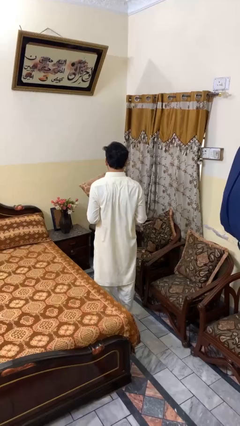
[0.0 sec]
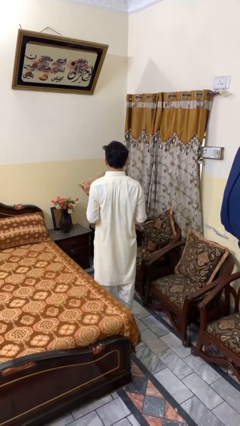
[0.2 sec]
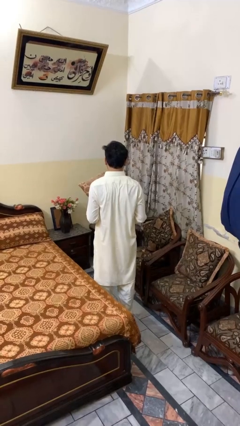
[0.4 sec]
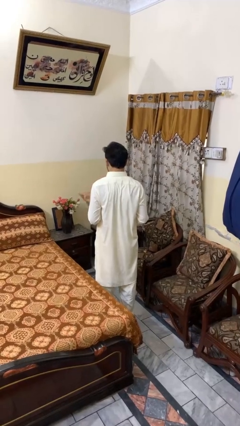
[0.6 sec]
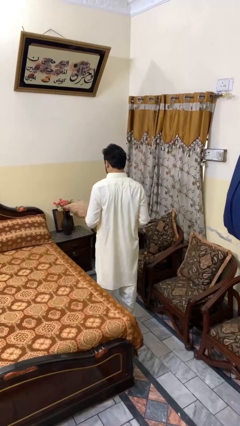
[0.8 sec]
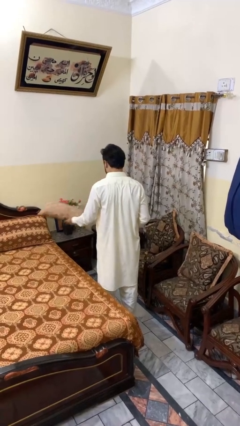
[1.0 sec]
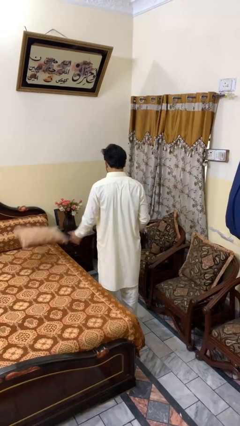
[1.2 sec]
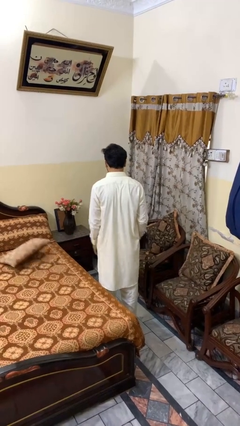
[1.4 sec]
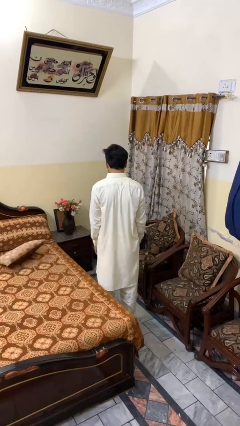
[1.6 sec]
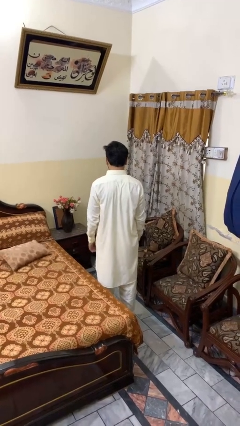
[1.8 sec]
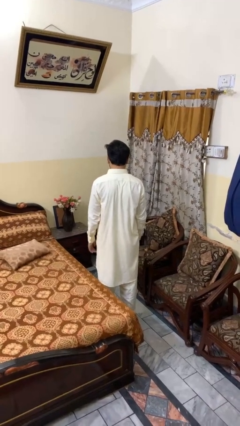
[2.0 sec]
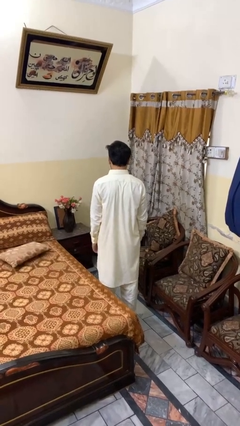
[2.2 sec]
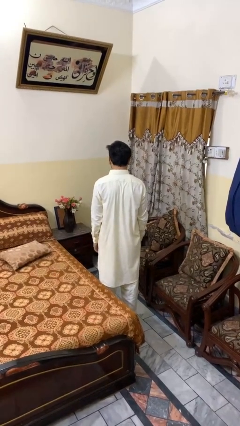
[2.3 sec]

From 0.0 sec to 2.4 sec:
person throws object on bed

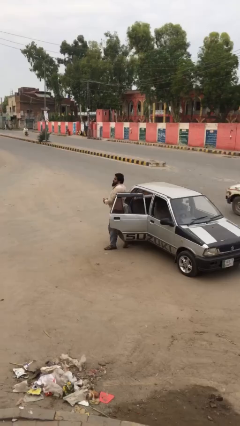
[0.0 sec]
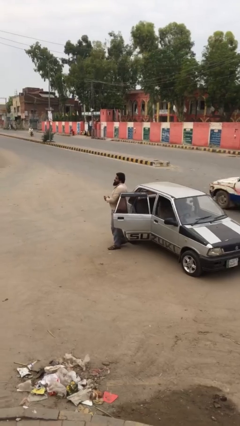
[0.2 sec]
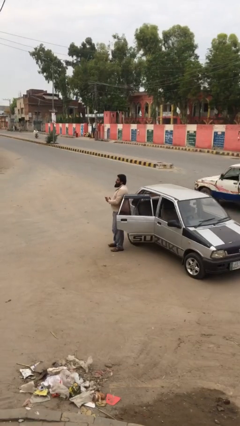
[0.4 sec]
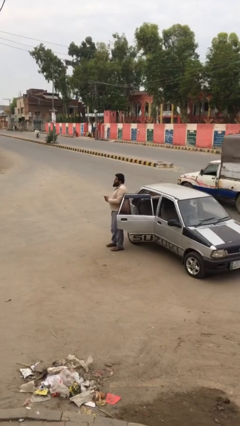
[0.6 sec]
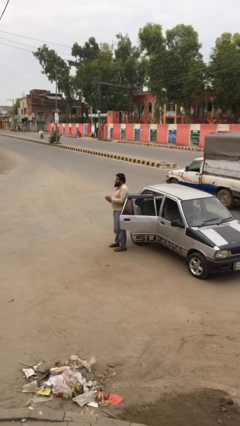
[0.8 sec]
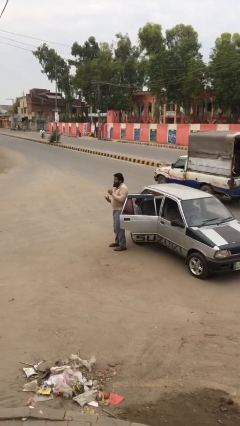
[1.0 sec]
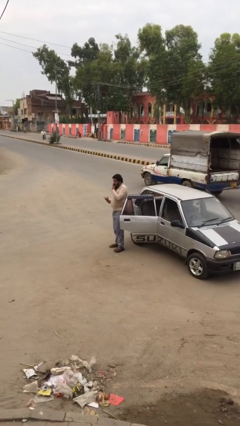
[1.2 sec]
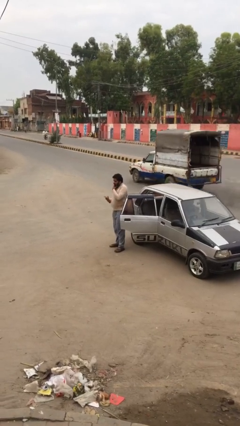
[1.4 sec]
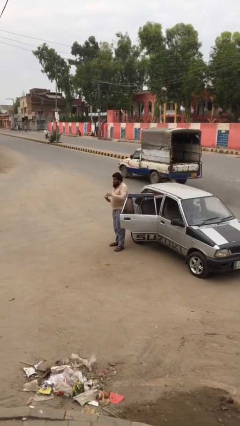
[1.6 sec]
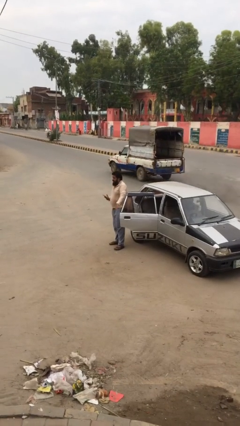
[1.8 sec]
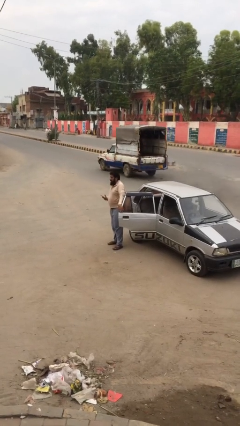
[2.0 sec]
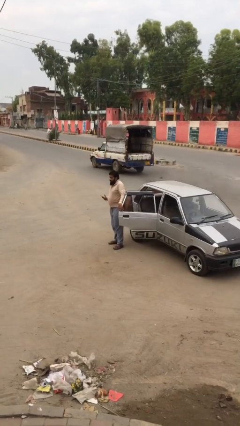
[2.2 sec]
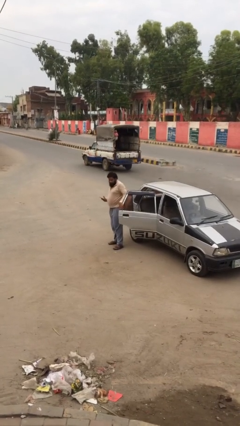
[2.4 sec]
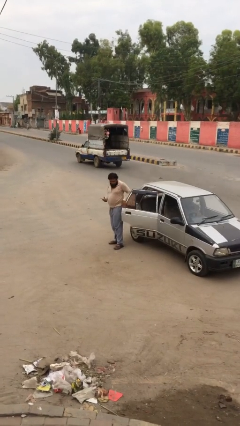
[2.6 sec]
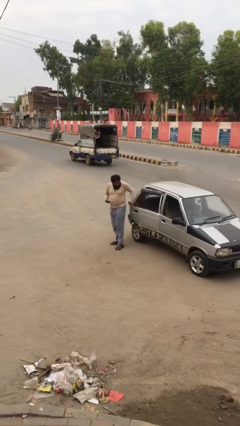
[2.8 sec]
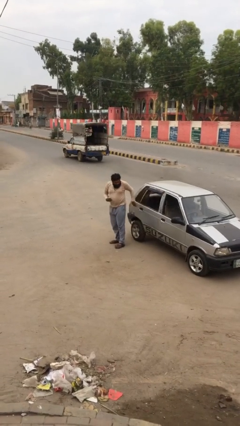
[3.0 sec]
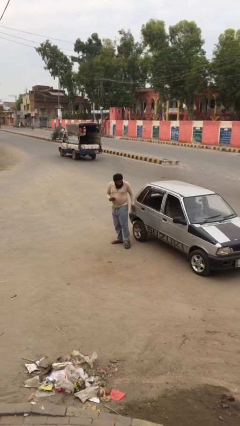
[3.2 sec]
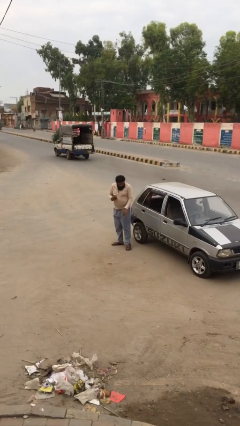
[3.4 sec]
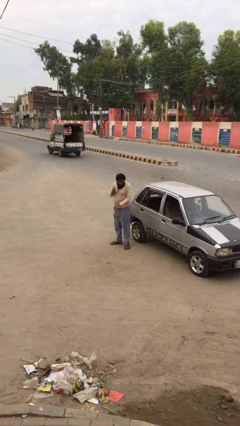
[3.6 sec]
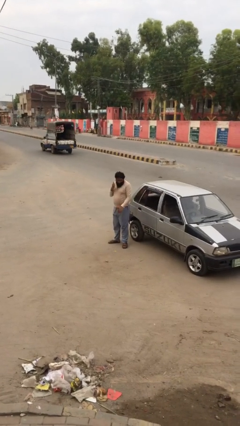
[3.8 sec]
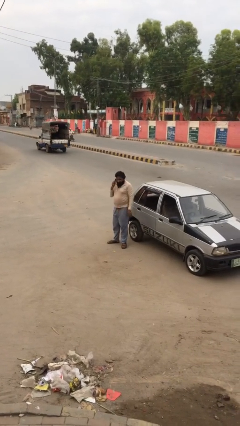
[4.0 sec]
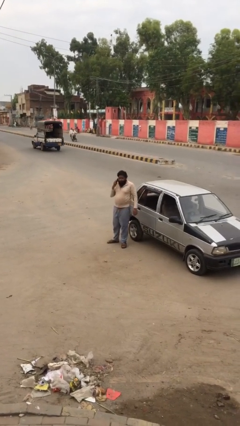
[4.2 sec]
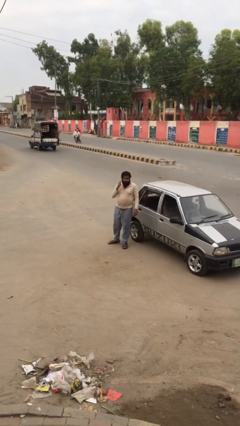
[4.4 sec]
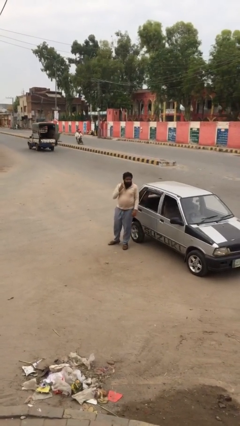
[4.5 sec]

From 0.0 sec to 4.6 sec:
person closes car door

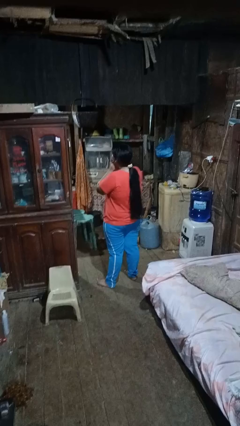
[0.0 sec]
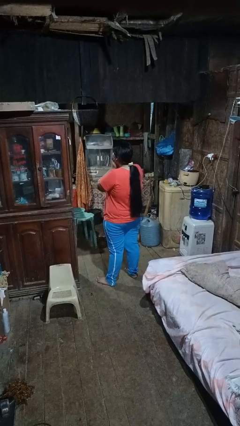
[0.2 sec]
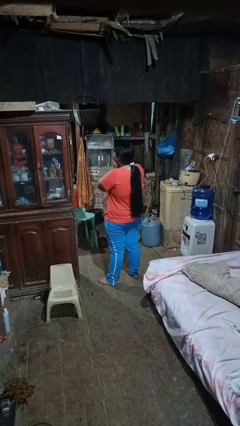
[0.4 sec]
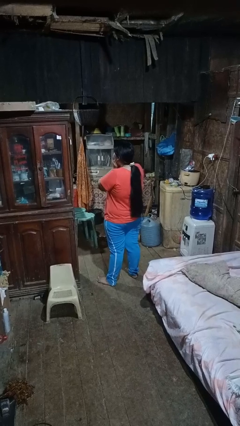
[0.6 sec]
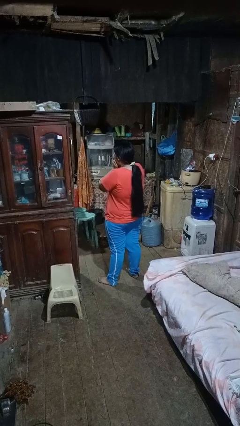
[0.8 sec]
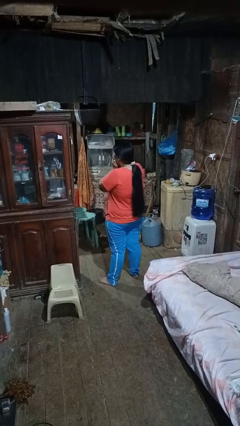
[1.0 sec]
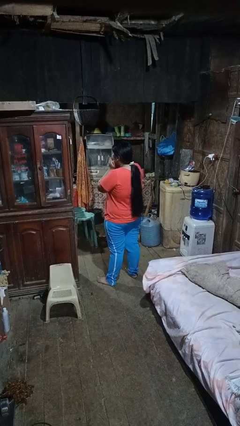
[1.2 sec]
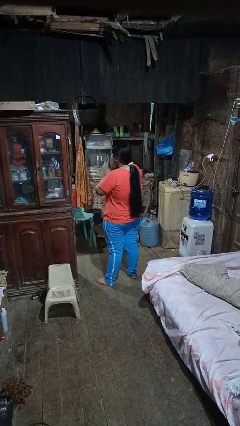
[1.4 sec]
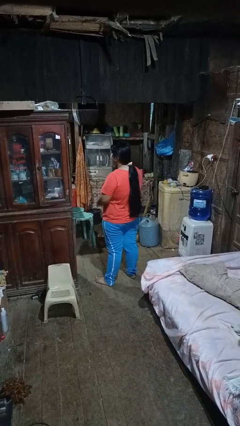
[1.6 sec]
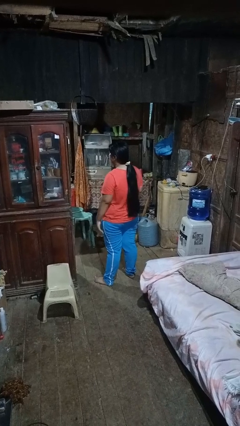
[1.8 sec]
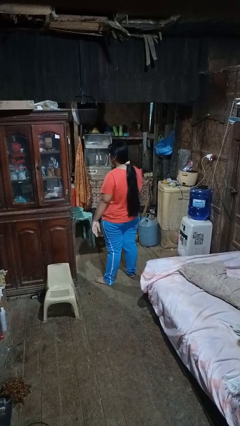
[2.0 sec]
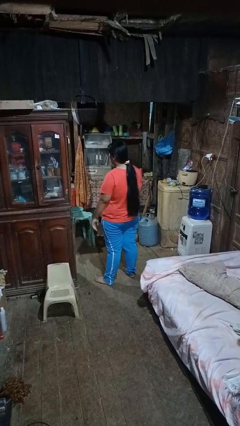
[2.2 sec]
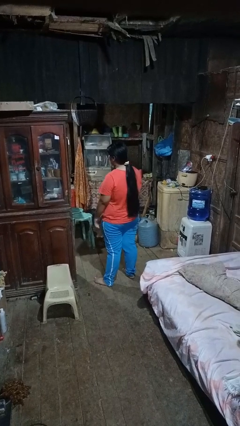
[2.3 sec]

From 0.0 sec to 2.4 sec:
person yawns

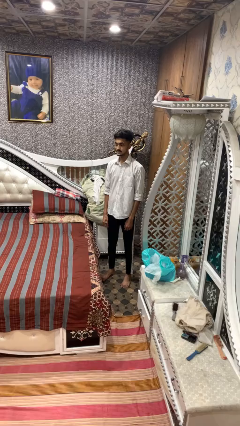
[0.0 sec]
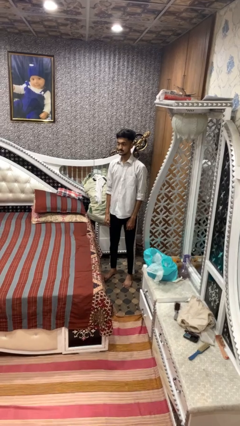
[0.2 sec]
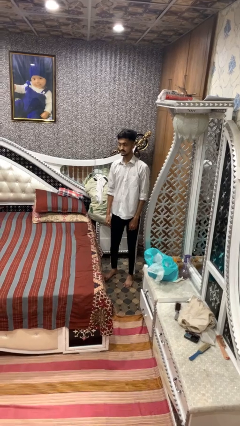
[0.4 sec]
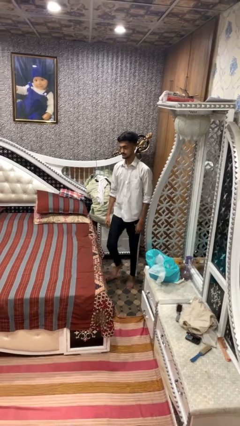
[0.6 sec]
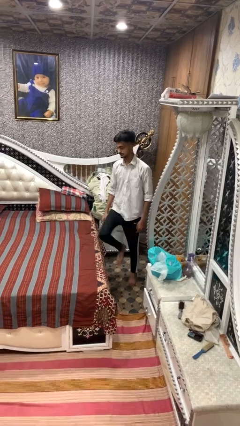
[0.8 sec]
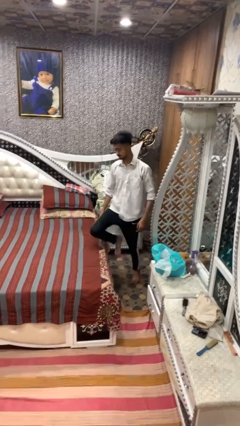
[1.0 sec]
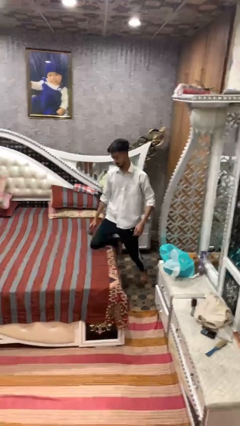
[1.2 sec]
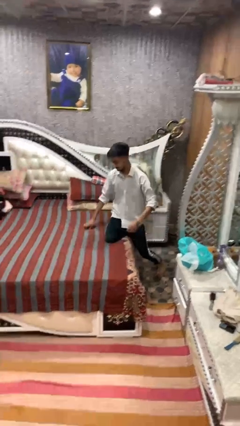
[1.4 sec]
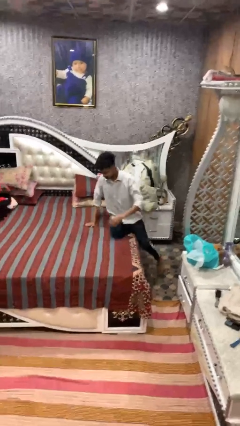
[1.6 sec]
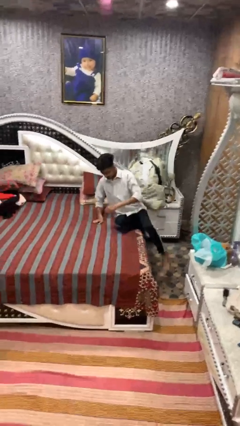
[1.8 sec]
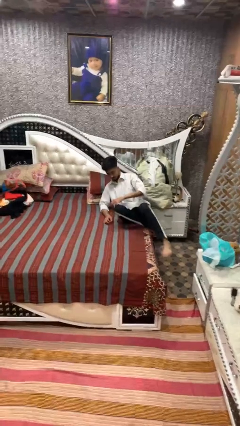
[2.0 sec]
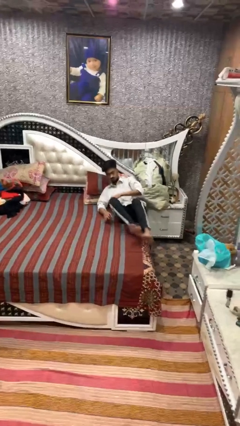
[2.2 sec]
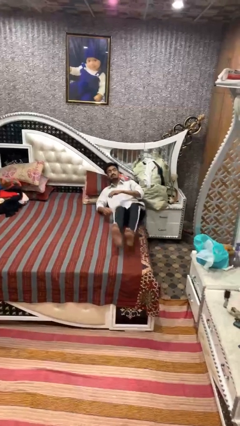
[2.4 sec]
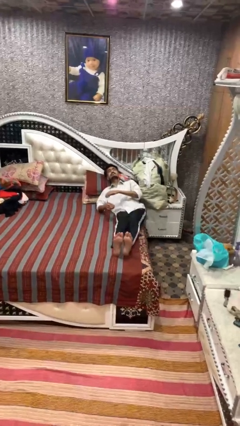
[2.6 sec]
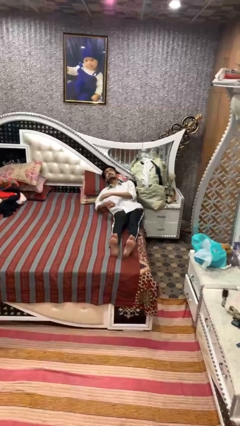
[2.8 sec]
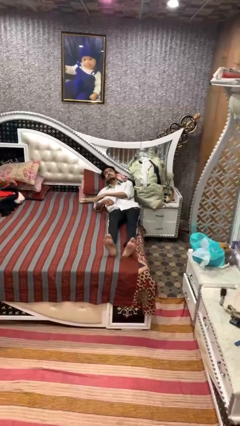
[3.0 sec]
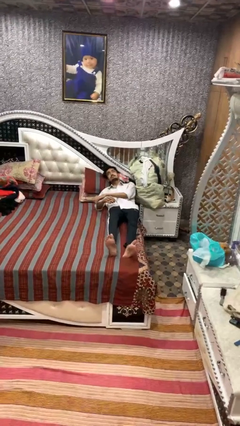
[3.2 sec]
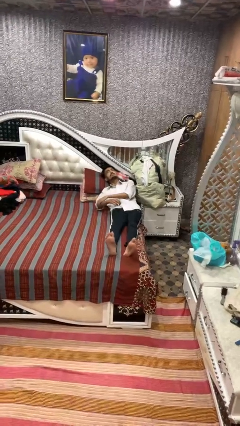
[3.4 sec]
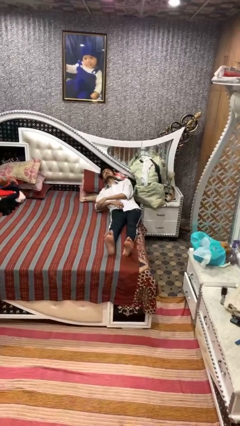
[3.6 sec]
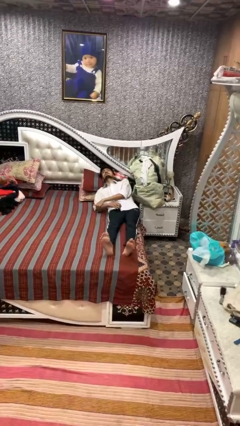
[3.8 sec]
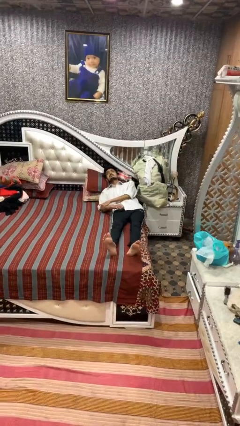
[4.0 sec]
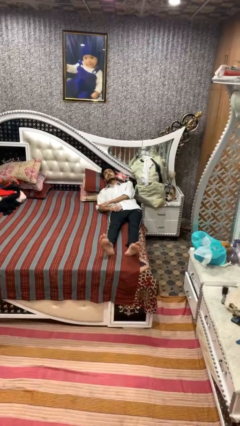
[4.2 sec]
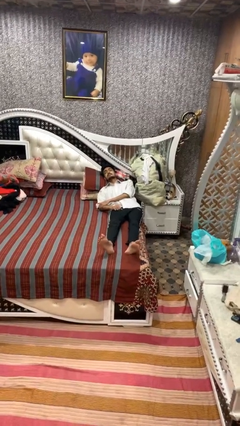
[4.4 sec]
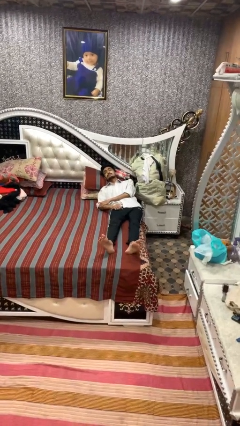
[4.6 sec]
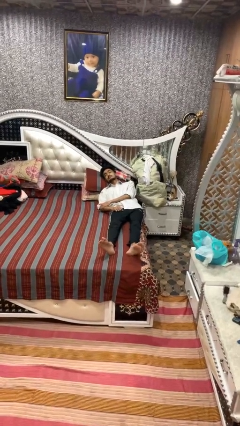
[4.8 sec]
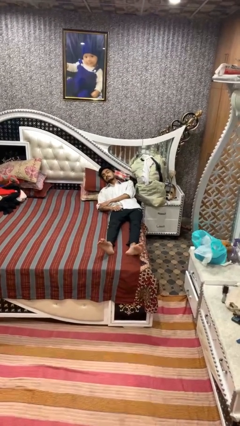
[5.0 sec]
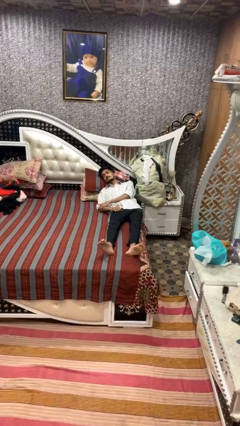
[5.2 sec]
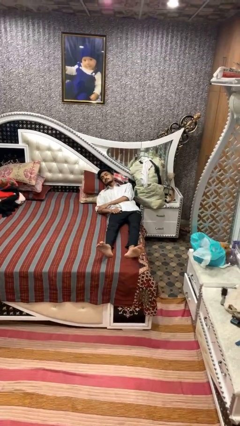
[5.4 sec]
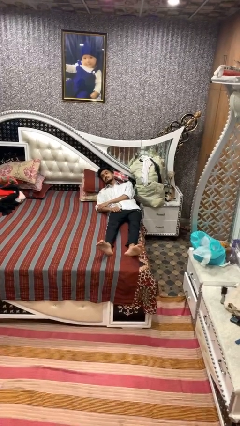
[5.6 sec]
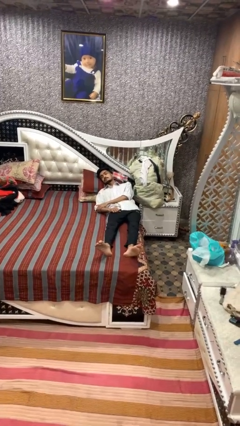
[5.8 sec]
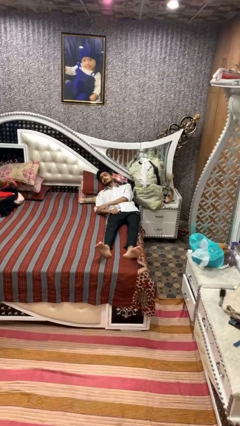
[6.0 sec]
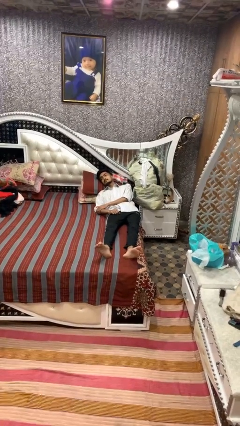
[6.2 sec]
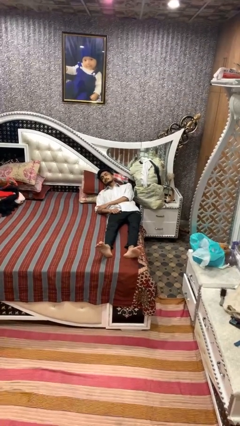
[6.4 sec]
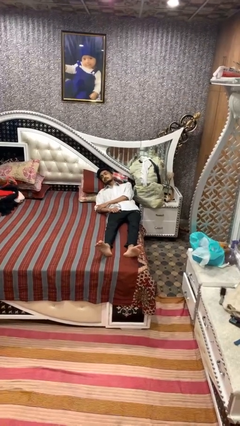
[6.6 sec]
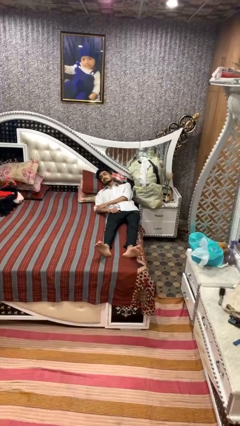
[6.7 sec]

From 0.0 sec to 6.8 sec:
person lies down on bed

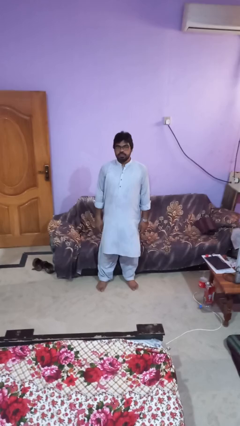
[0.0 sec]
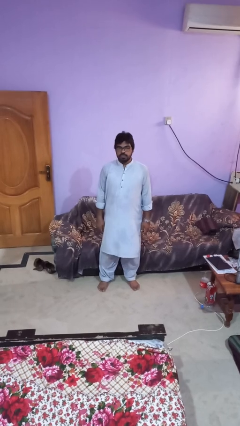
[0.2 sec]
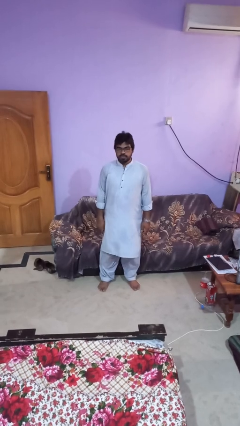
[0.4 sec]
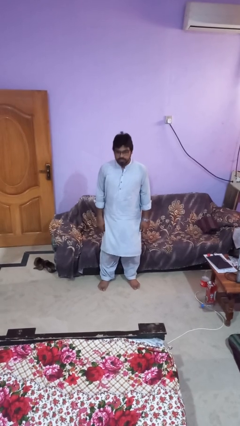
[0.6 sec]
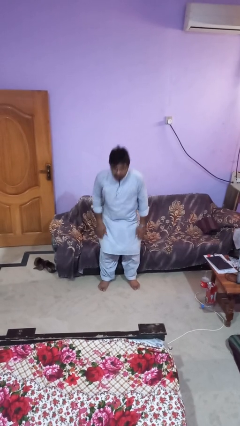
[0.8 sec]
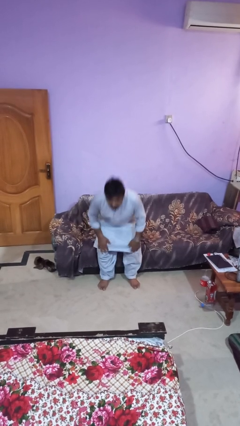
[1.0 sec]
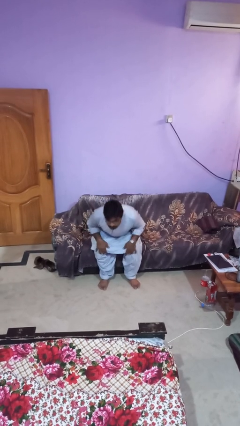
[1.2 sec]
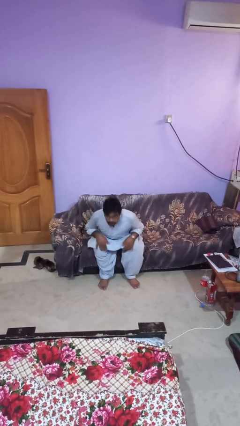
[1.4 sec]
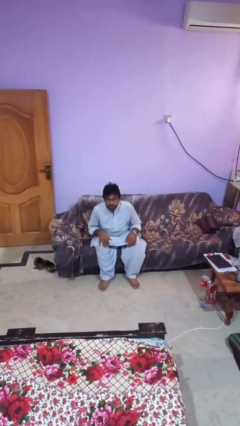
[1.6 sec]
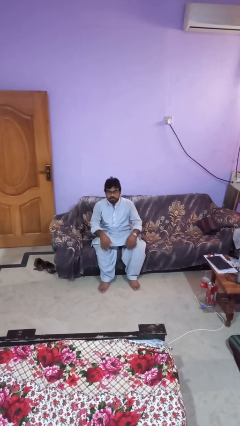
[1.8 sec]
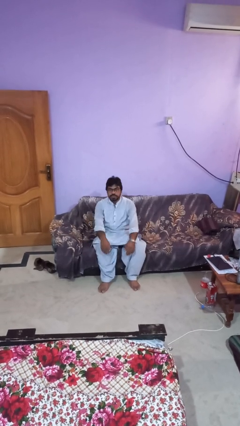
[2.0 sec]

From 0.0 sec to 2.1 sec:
person lies down on couch
